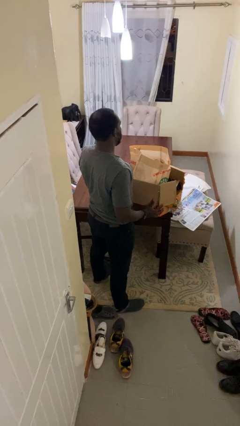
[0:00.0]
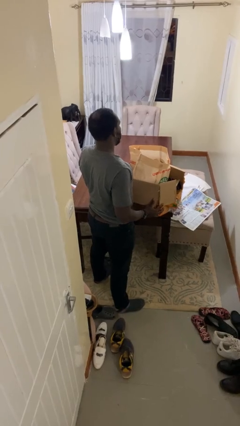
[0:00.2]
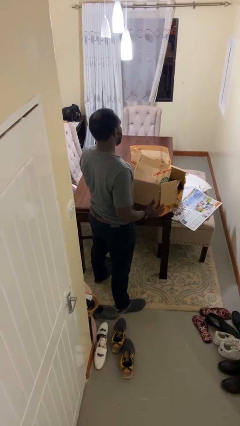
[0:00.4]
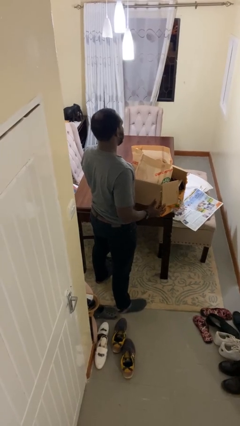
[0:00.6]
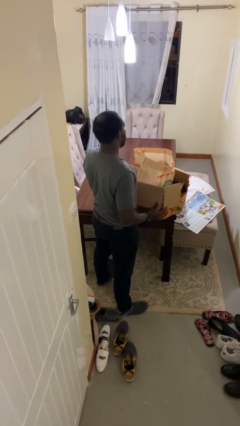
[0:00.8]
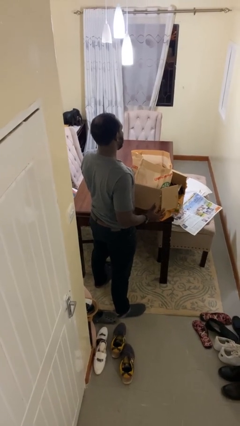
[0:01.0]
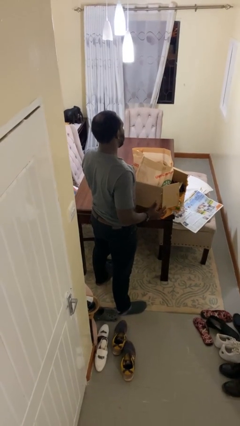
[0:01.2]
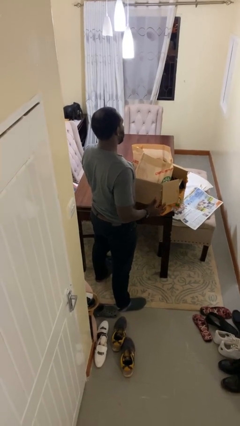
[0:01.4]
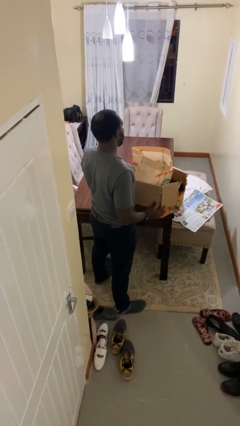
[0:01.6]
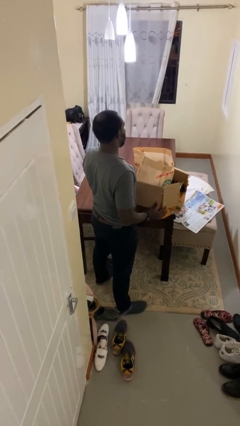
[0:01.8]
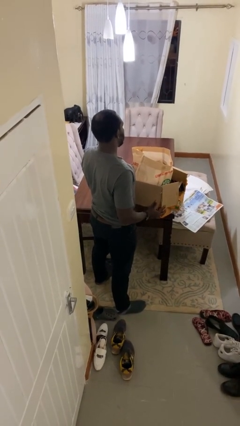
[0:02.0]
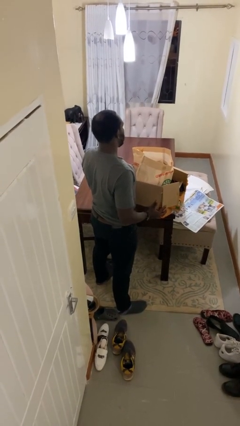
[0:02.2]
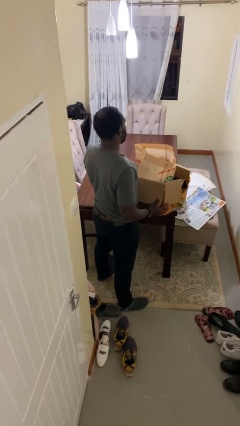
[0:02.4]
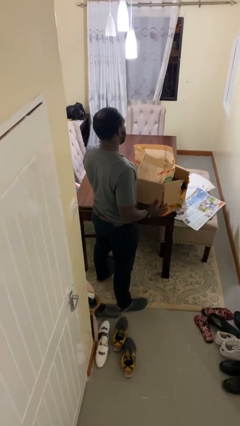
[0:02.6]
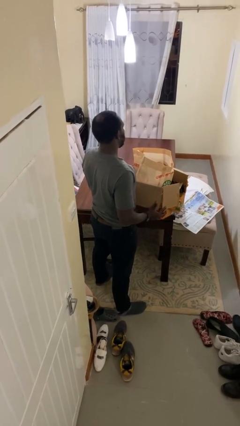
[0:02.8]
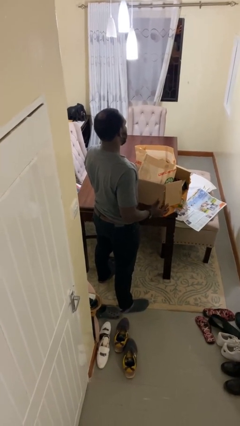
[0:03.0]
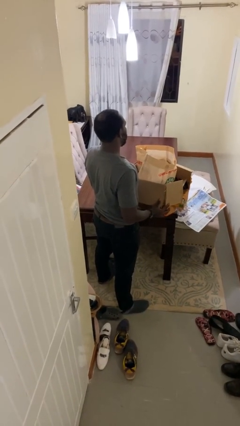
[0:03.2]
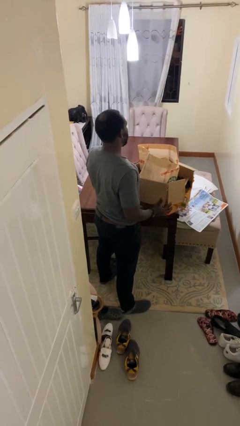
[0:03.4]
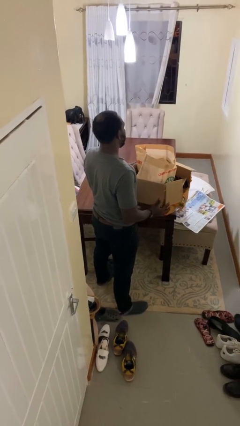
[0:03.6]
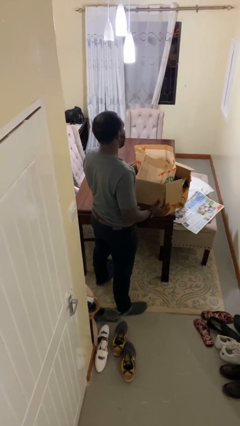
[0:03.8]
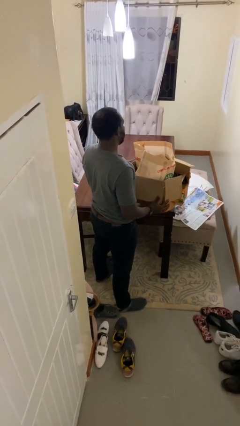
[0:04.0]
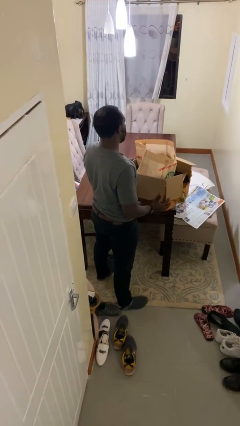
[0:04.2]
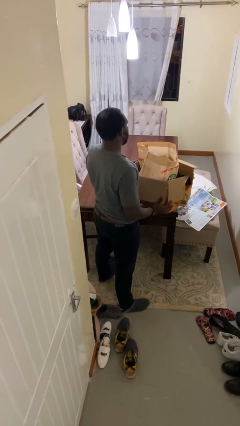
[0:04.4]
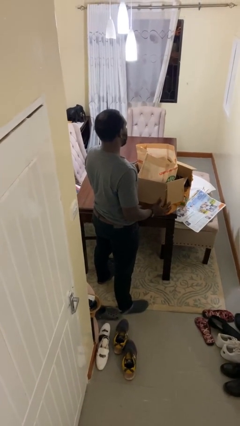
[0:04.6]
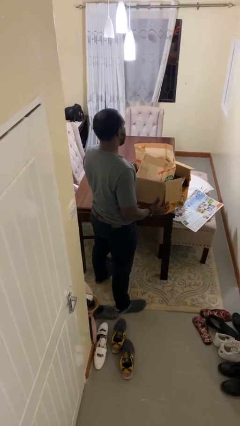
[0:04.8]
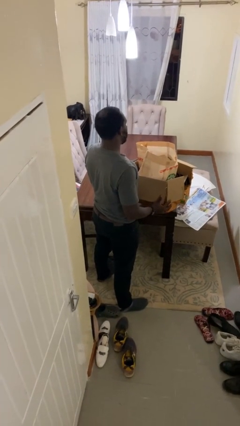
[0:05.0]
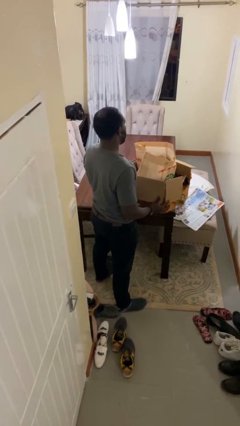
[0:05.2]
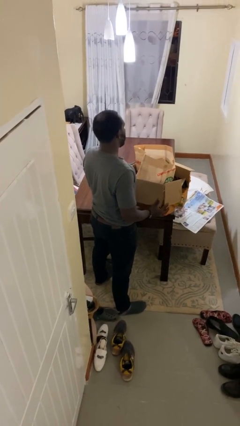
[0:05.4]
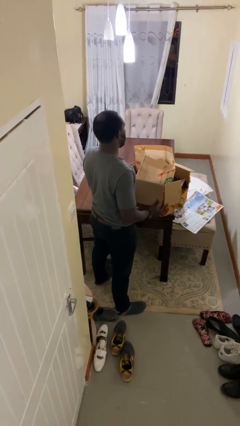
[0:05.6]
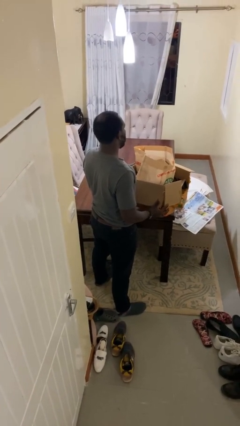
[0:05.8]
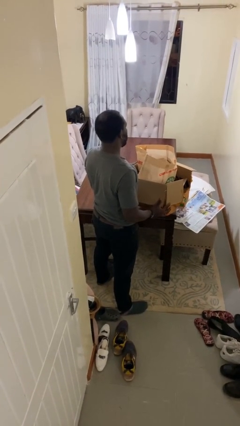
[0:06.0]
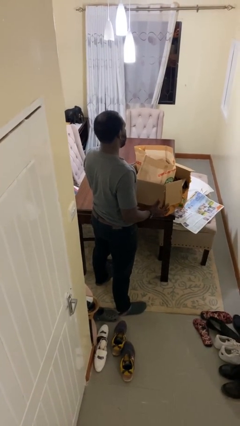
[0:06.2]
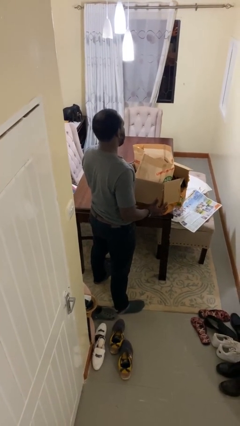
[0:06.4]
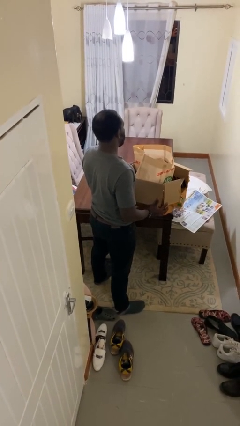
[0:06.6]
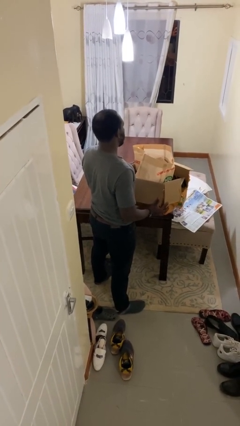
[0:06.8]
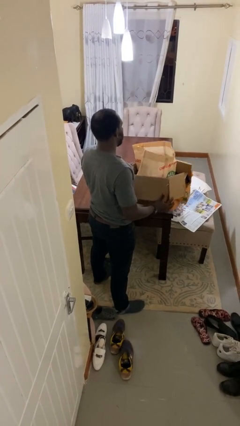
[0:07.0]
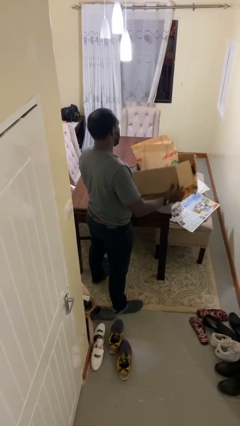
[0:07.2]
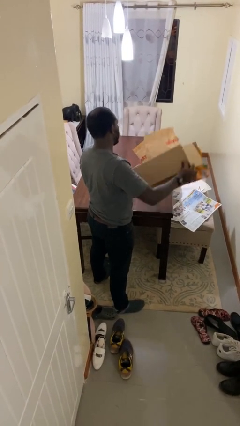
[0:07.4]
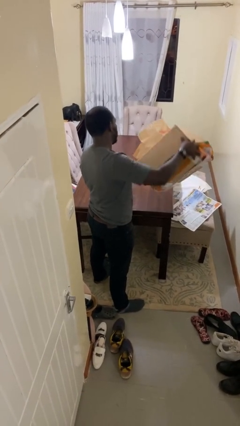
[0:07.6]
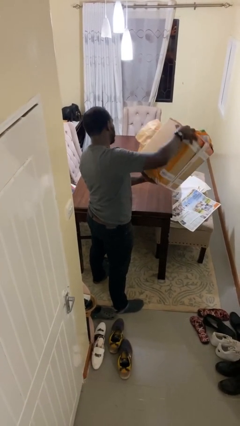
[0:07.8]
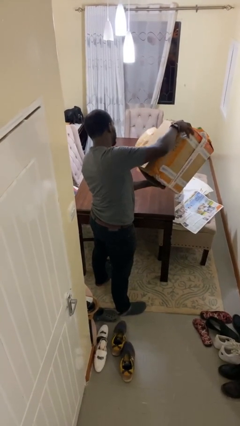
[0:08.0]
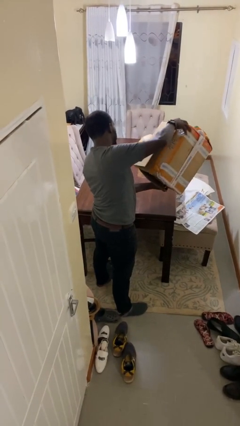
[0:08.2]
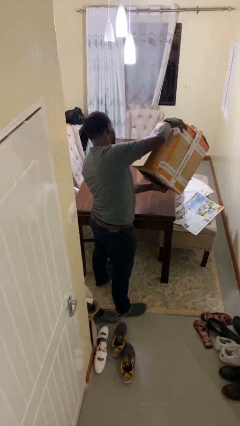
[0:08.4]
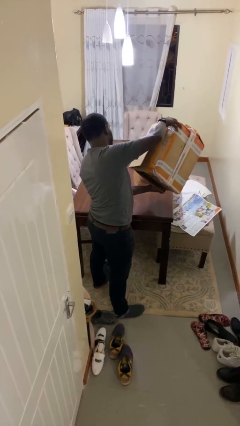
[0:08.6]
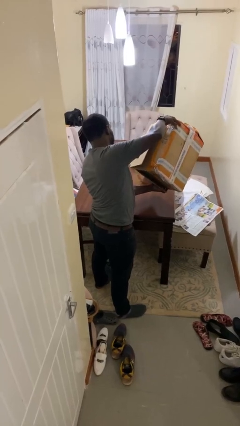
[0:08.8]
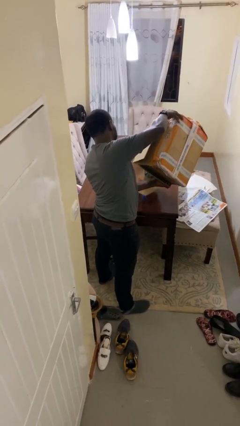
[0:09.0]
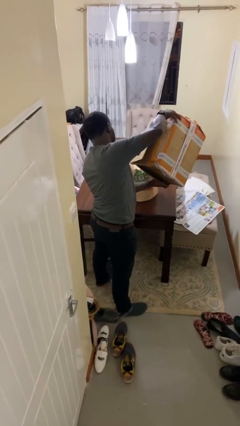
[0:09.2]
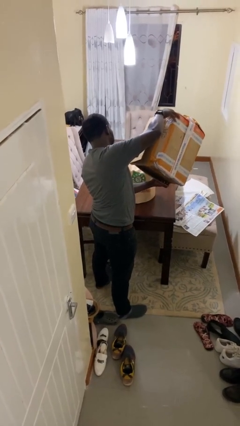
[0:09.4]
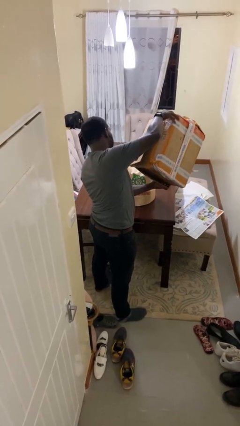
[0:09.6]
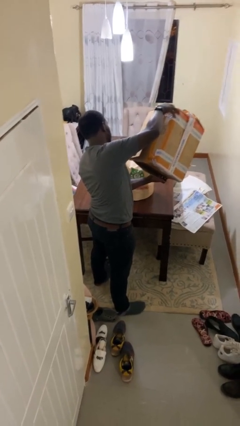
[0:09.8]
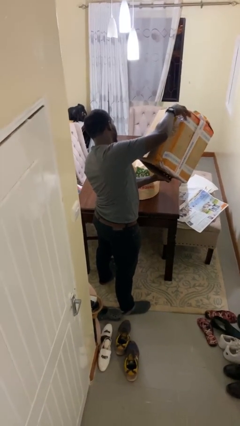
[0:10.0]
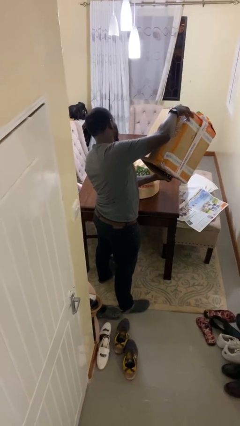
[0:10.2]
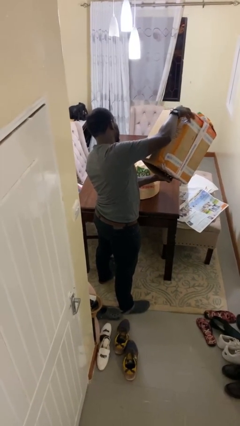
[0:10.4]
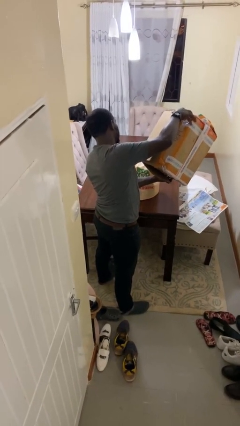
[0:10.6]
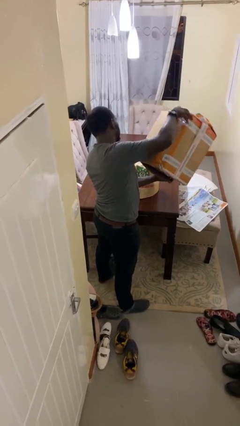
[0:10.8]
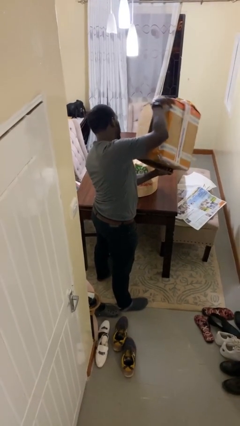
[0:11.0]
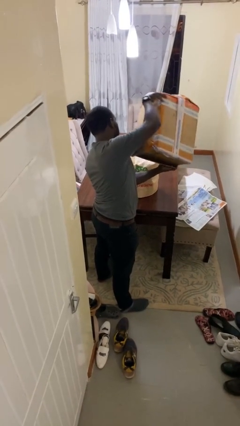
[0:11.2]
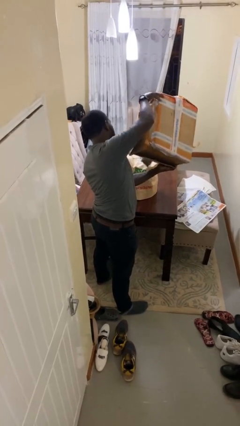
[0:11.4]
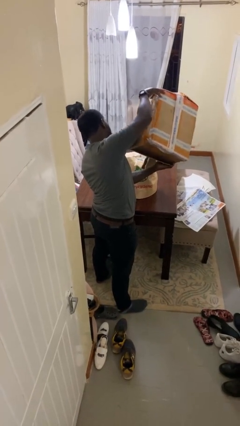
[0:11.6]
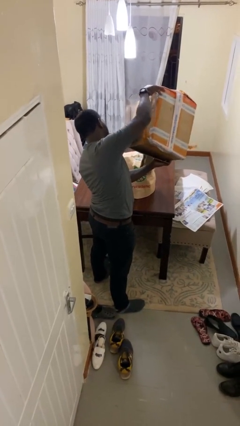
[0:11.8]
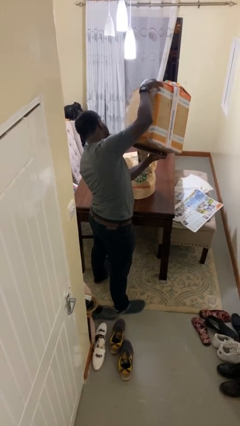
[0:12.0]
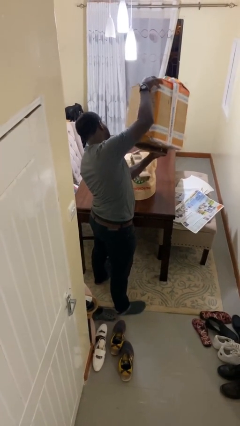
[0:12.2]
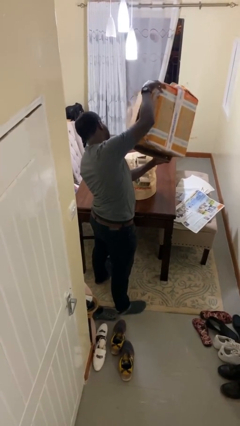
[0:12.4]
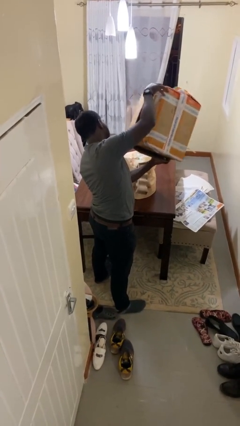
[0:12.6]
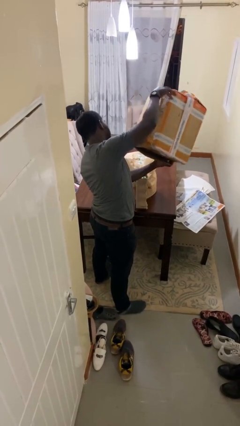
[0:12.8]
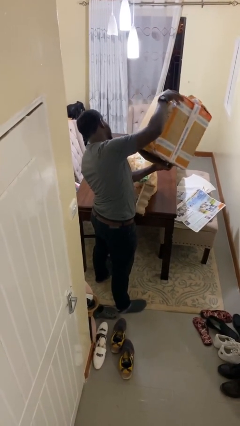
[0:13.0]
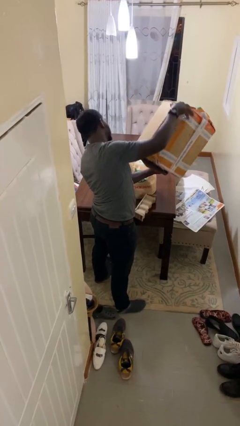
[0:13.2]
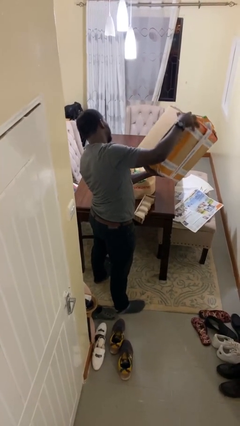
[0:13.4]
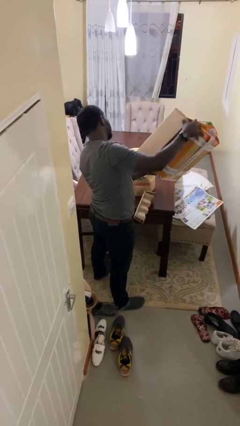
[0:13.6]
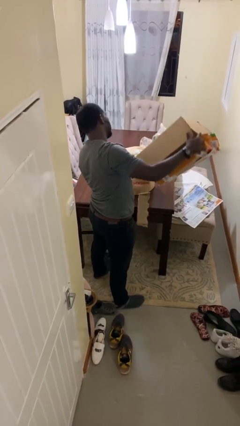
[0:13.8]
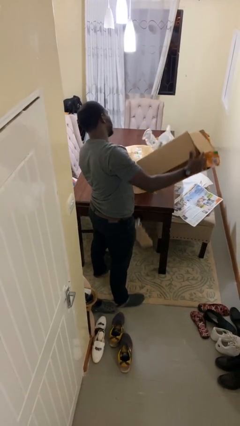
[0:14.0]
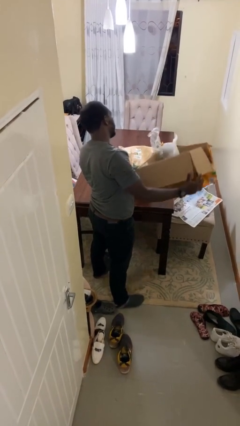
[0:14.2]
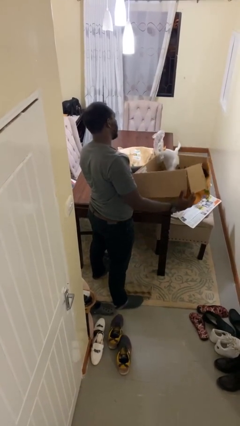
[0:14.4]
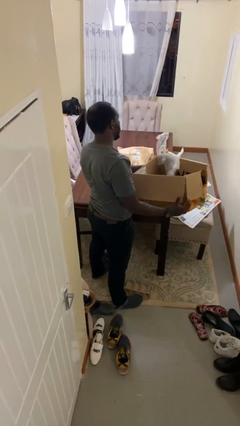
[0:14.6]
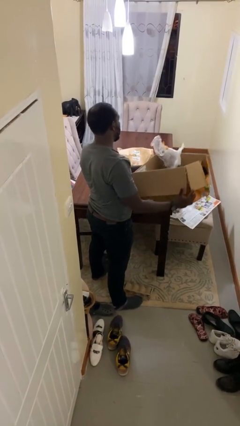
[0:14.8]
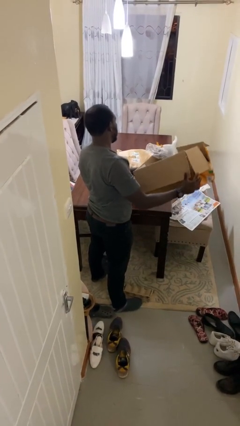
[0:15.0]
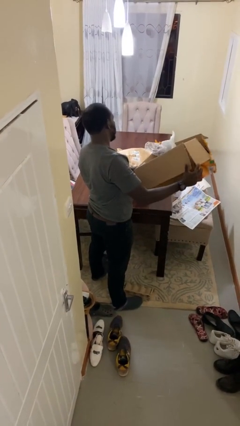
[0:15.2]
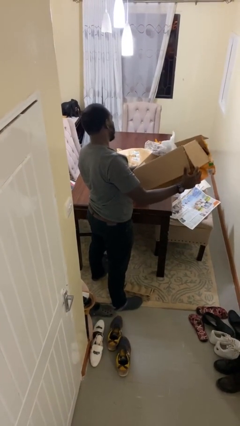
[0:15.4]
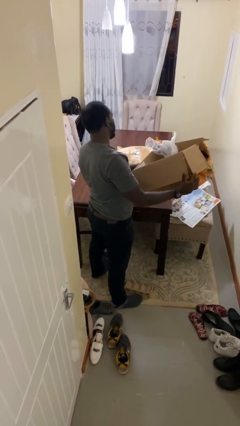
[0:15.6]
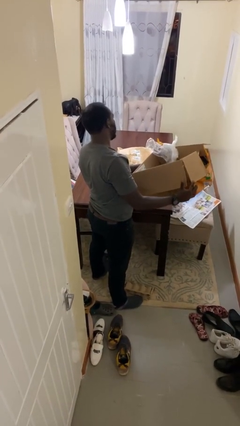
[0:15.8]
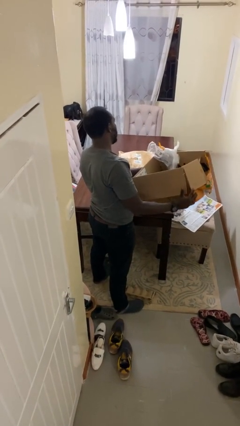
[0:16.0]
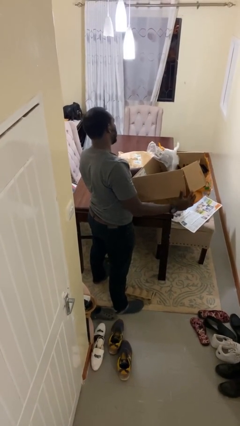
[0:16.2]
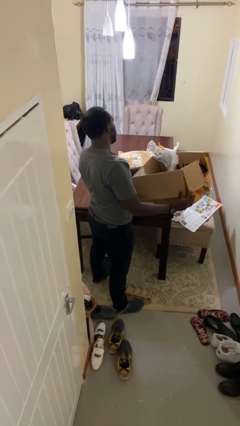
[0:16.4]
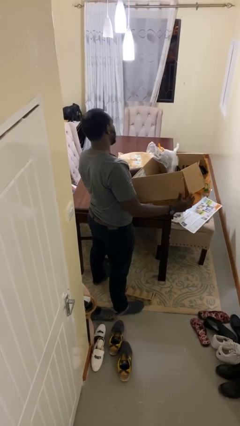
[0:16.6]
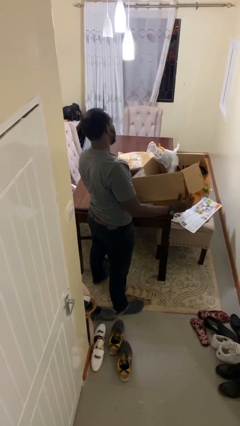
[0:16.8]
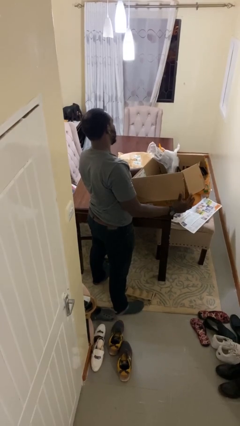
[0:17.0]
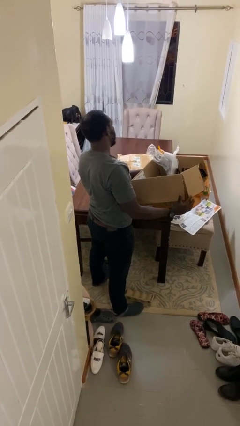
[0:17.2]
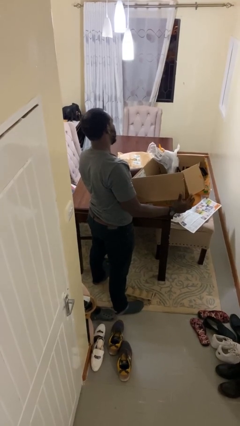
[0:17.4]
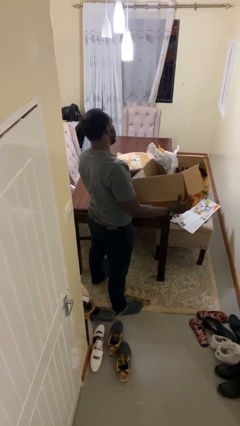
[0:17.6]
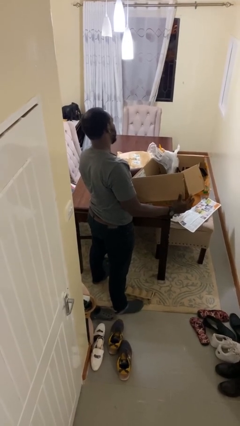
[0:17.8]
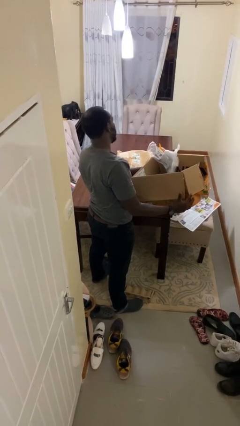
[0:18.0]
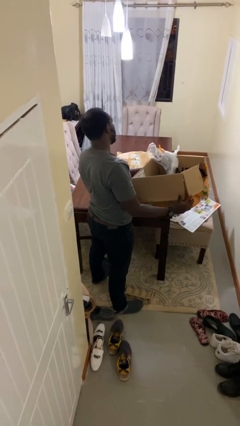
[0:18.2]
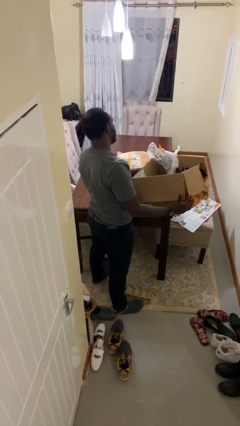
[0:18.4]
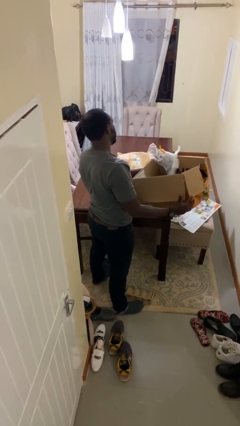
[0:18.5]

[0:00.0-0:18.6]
person unloads box onto table
